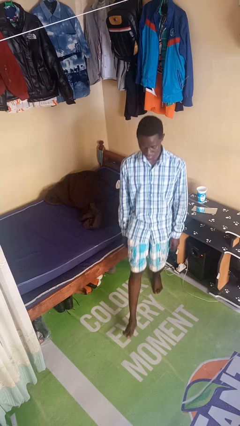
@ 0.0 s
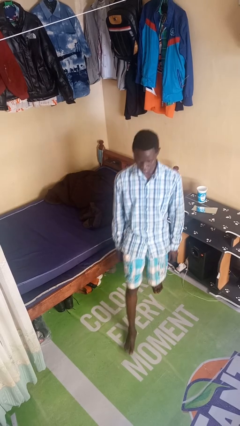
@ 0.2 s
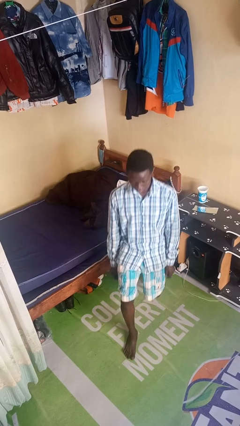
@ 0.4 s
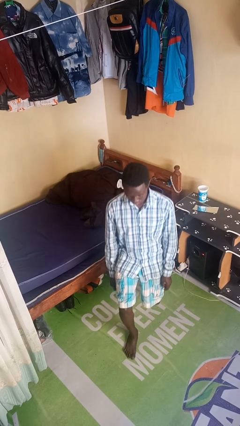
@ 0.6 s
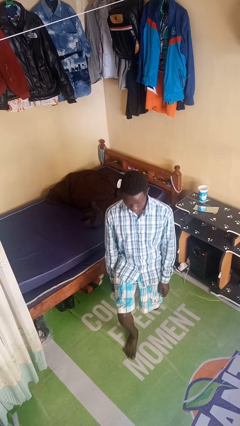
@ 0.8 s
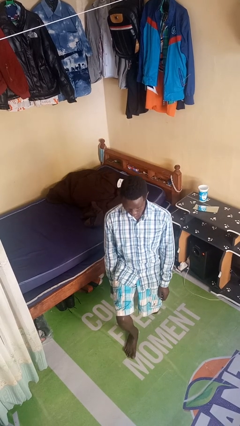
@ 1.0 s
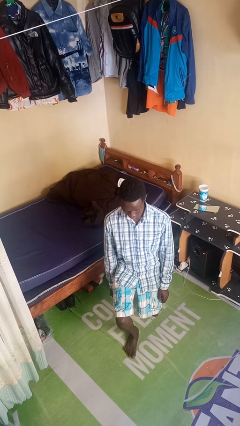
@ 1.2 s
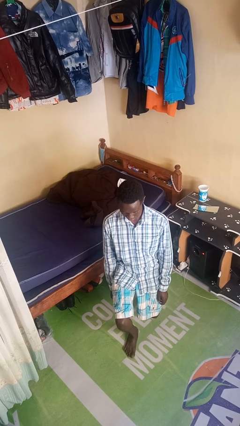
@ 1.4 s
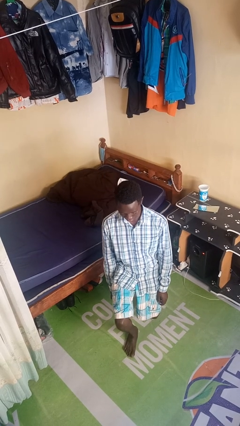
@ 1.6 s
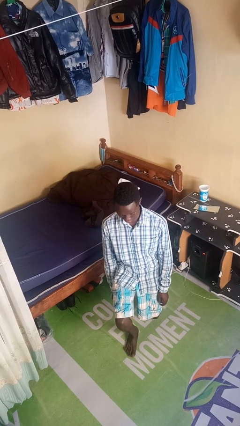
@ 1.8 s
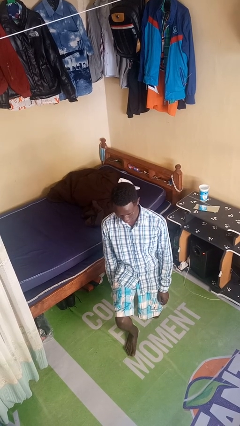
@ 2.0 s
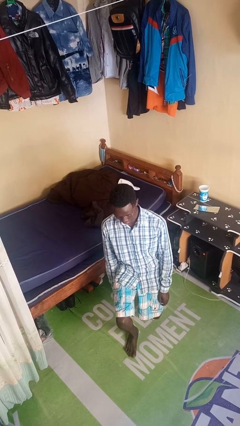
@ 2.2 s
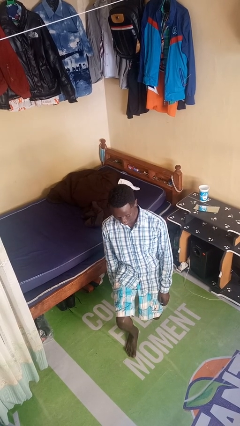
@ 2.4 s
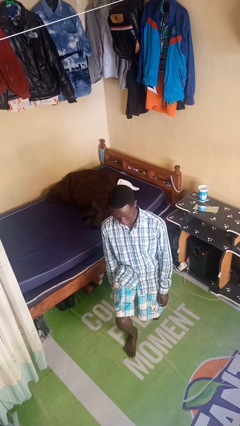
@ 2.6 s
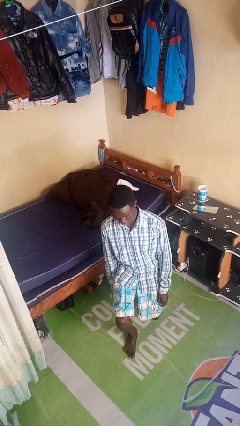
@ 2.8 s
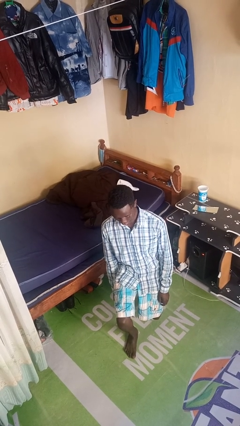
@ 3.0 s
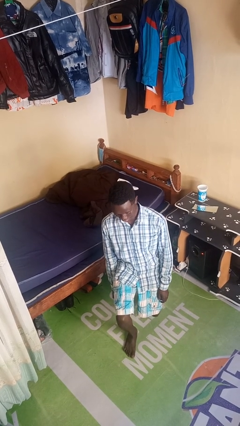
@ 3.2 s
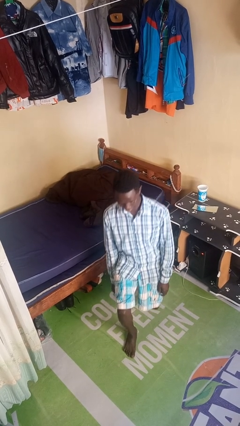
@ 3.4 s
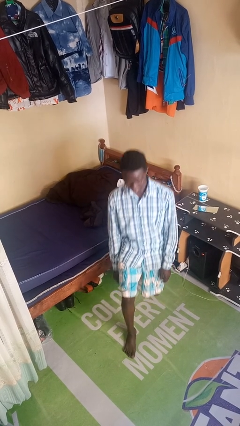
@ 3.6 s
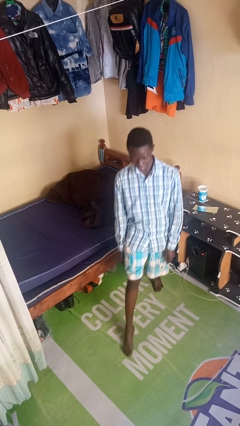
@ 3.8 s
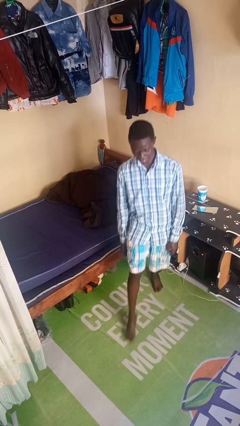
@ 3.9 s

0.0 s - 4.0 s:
person exercises with lunges

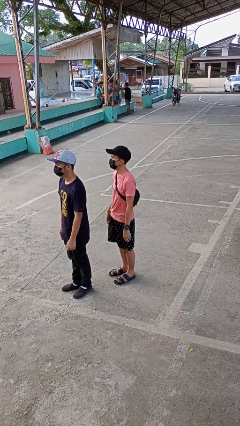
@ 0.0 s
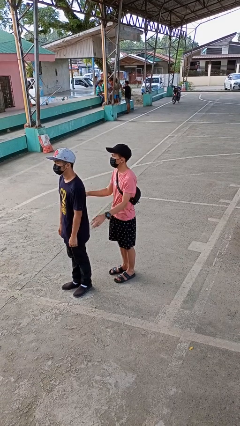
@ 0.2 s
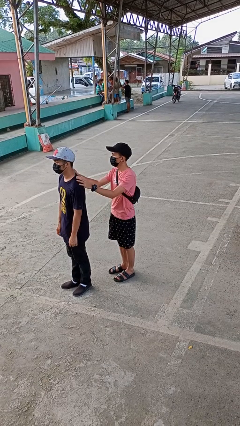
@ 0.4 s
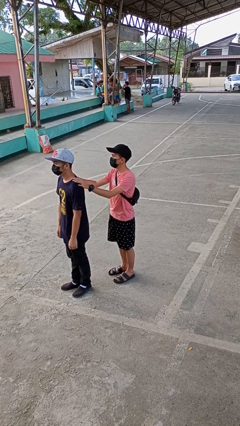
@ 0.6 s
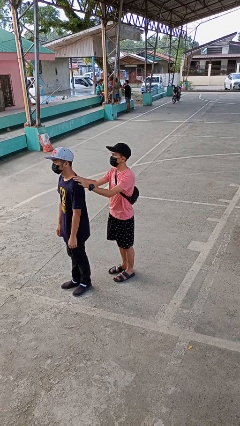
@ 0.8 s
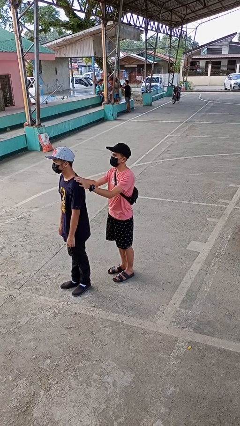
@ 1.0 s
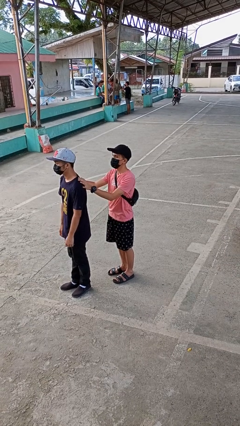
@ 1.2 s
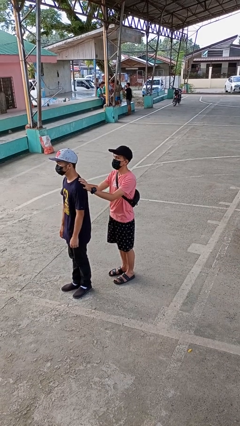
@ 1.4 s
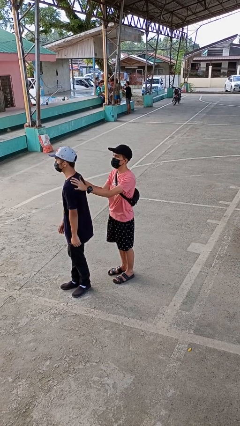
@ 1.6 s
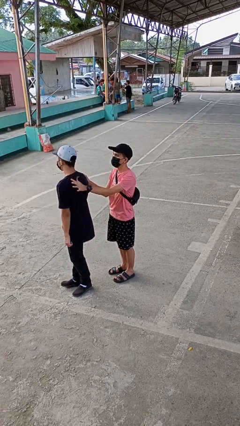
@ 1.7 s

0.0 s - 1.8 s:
person grabs person by shoulder

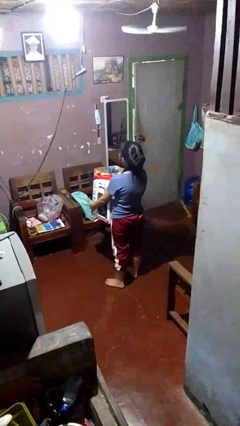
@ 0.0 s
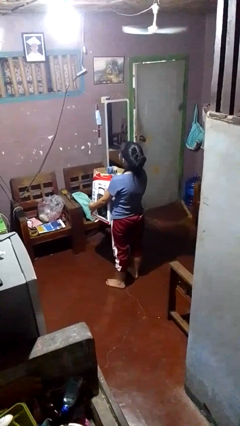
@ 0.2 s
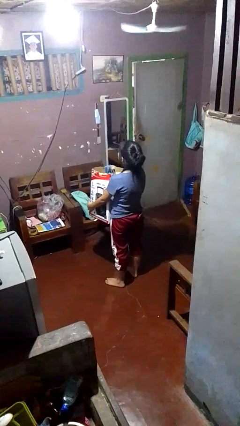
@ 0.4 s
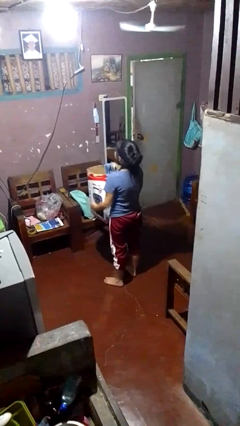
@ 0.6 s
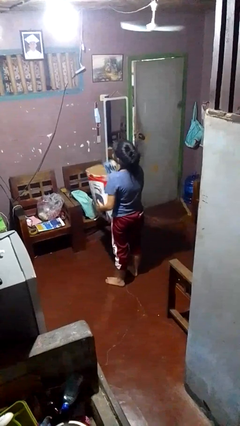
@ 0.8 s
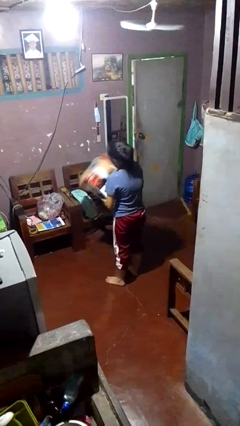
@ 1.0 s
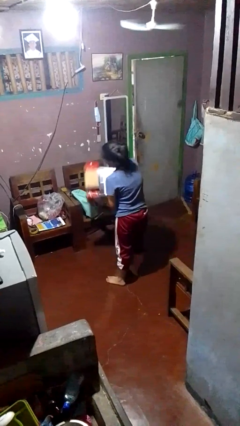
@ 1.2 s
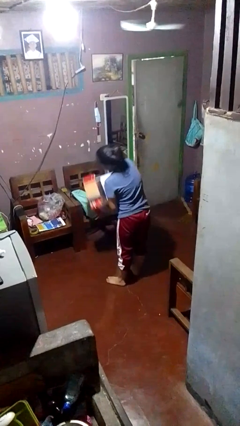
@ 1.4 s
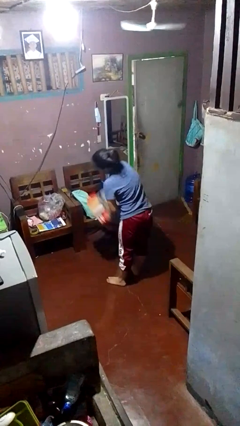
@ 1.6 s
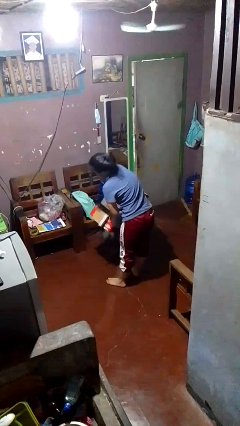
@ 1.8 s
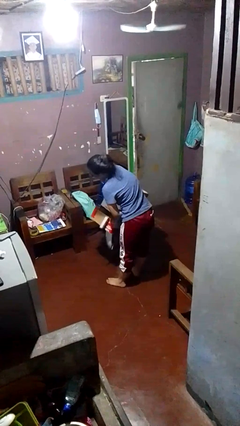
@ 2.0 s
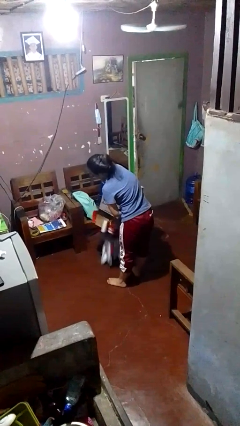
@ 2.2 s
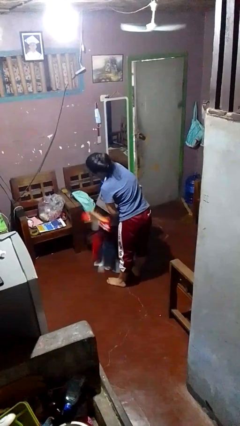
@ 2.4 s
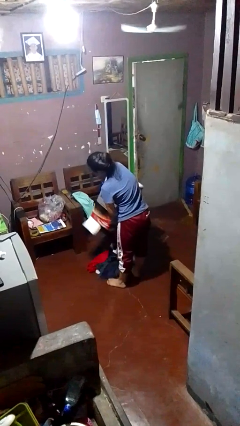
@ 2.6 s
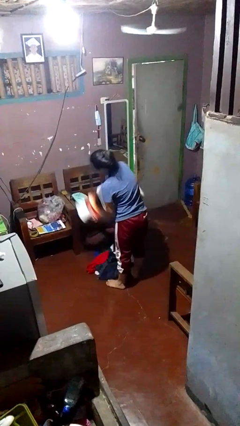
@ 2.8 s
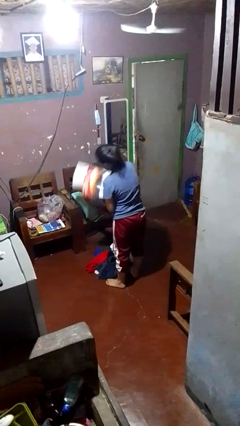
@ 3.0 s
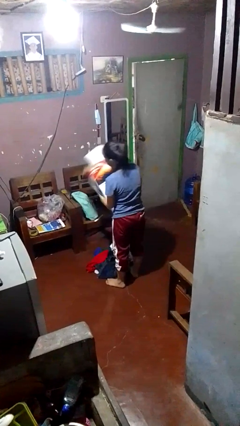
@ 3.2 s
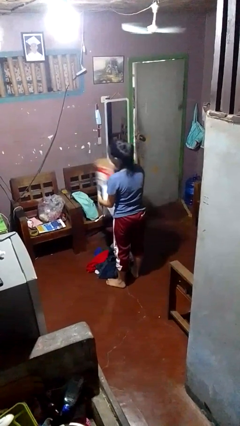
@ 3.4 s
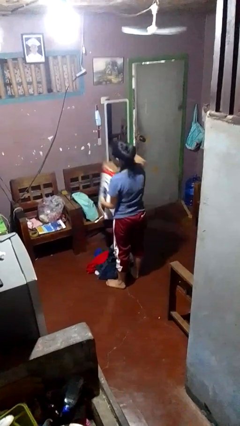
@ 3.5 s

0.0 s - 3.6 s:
person unloads box onto floor

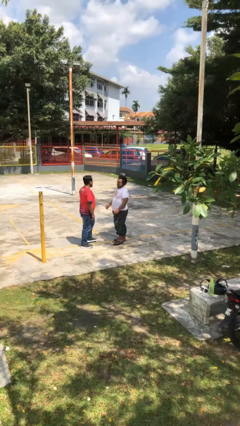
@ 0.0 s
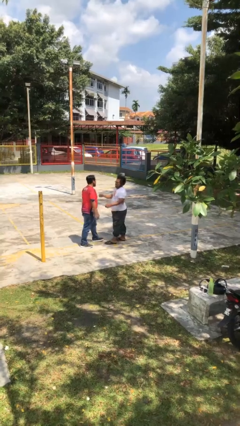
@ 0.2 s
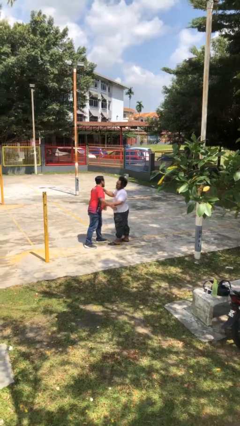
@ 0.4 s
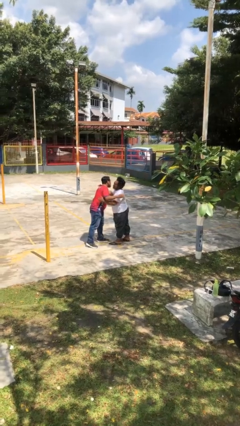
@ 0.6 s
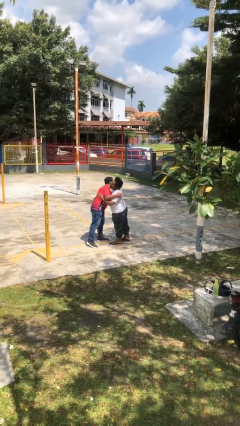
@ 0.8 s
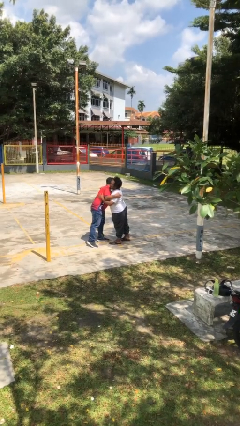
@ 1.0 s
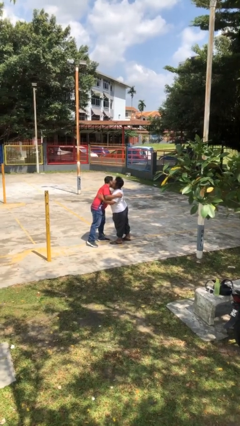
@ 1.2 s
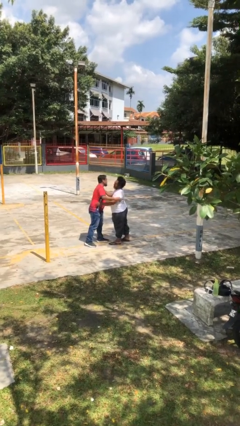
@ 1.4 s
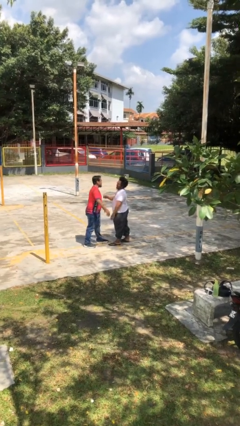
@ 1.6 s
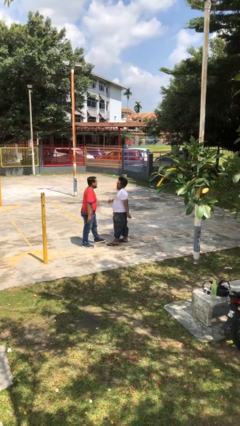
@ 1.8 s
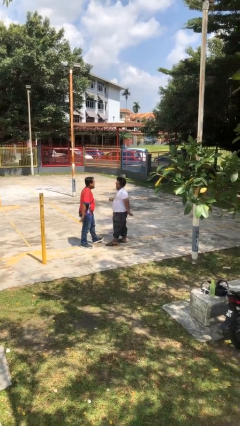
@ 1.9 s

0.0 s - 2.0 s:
person embraces person

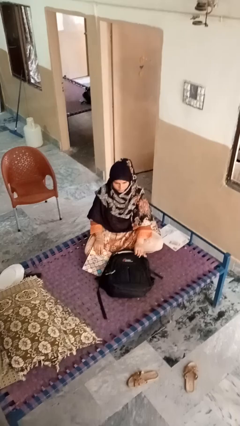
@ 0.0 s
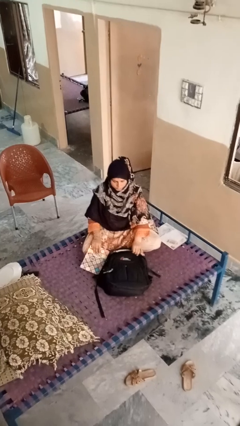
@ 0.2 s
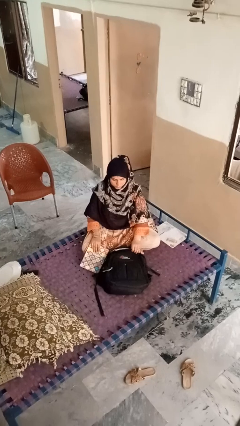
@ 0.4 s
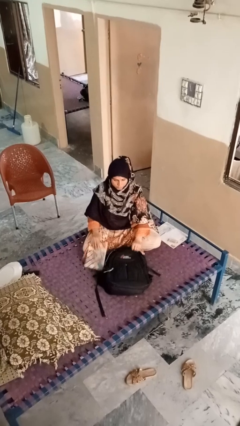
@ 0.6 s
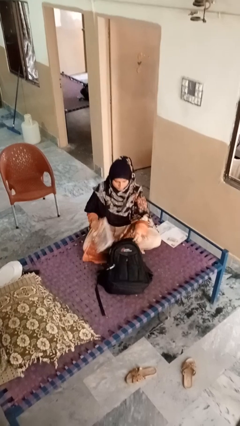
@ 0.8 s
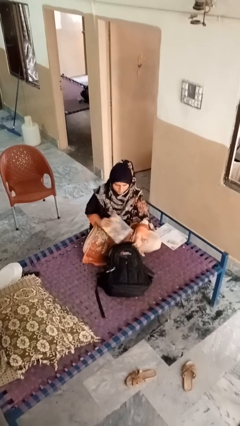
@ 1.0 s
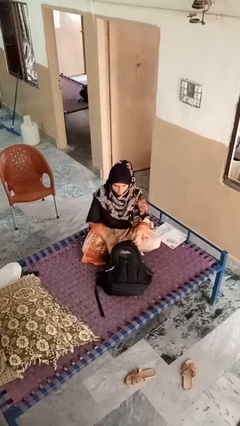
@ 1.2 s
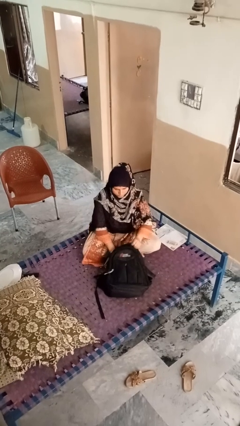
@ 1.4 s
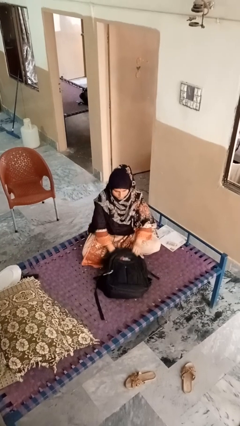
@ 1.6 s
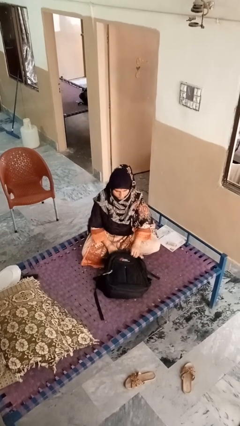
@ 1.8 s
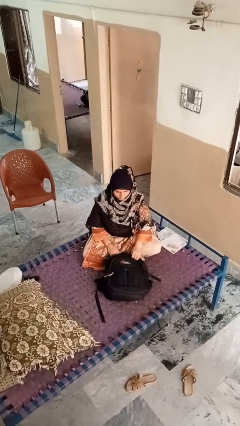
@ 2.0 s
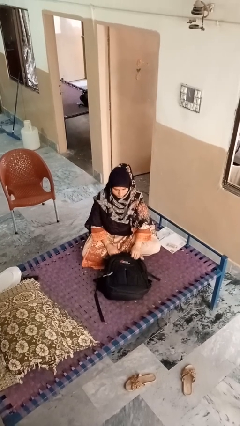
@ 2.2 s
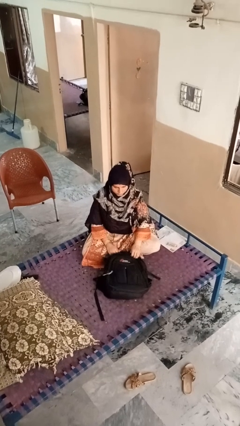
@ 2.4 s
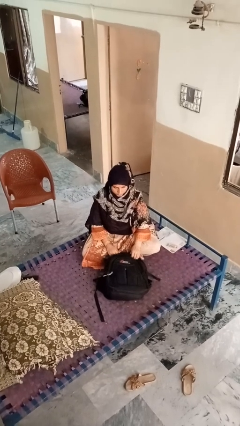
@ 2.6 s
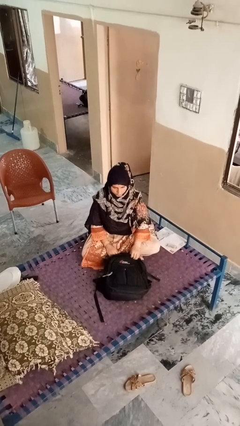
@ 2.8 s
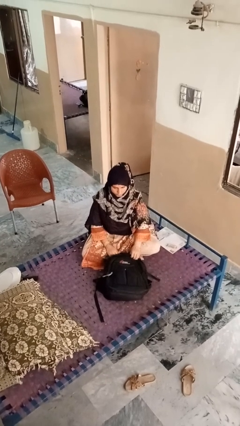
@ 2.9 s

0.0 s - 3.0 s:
person puts object into bag

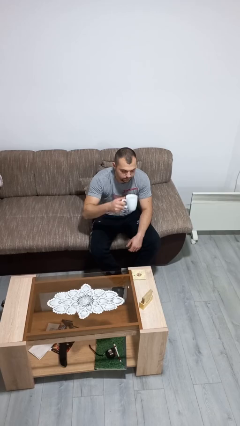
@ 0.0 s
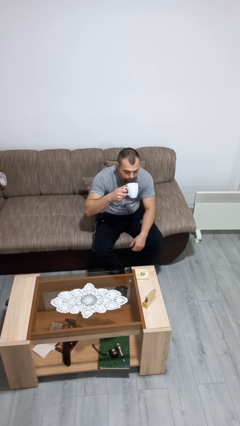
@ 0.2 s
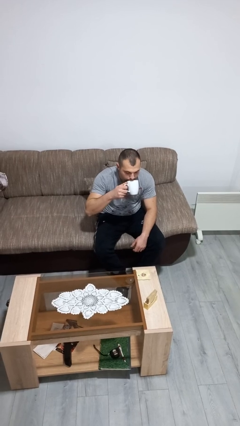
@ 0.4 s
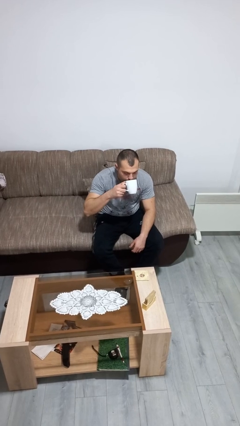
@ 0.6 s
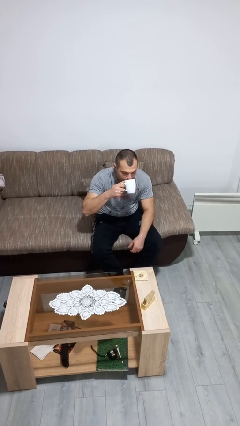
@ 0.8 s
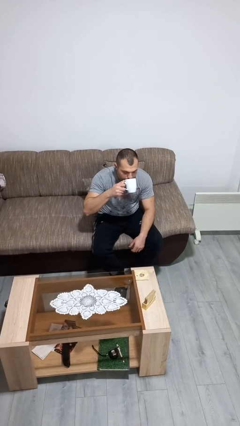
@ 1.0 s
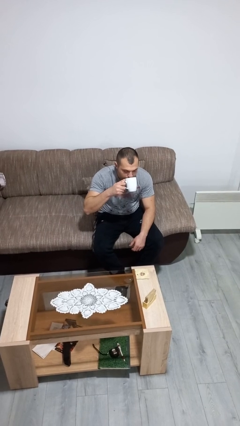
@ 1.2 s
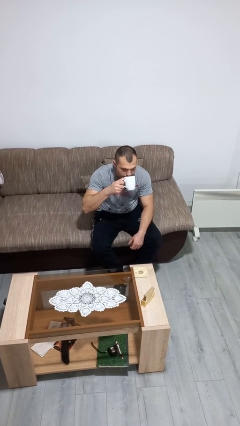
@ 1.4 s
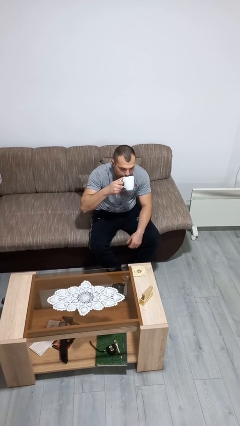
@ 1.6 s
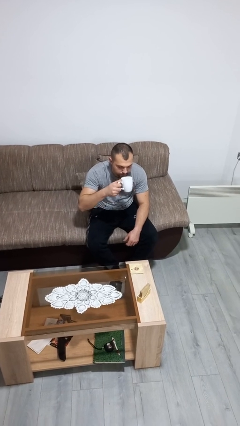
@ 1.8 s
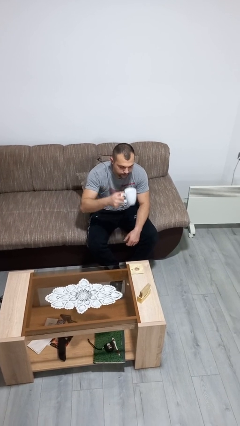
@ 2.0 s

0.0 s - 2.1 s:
person drinks from mug

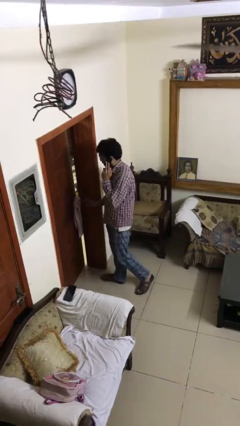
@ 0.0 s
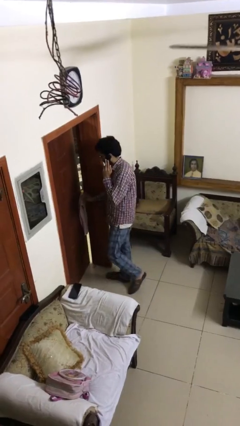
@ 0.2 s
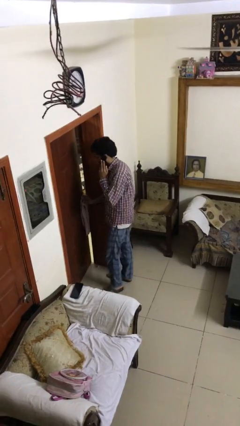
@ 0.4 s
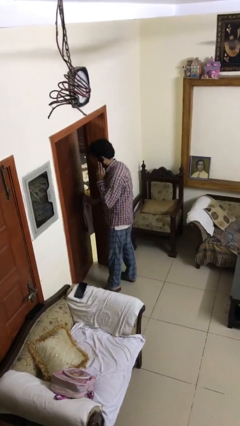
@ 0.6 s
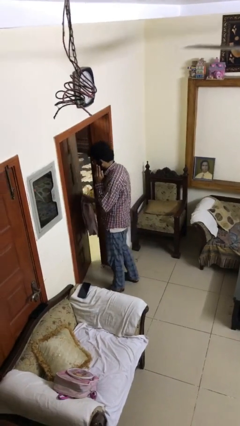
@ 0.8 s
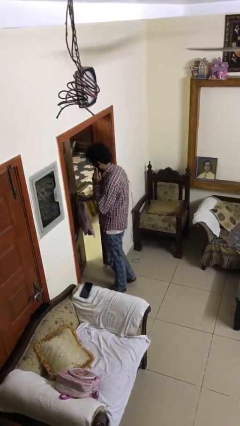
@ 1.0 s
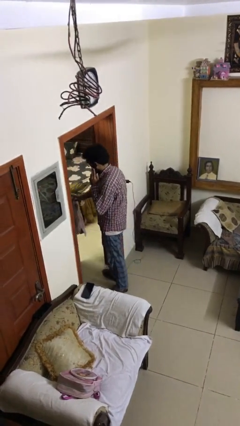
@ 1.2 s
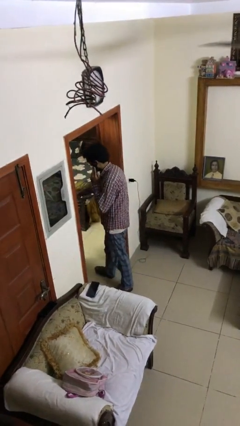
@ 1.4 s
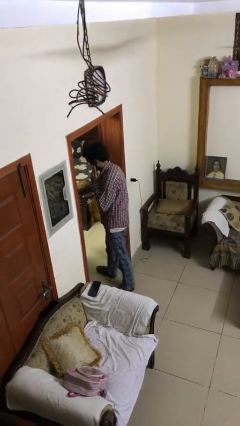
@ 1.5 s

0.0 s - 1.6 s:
person opens facility door
